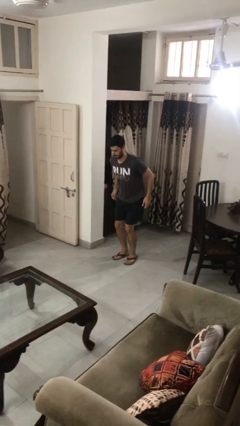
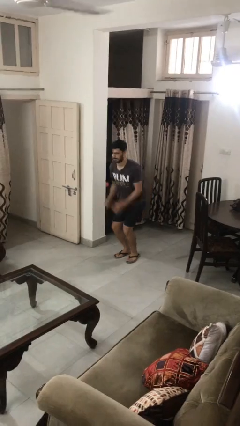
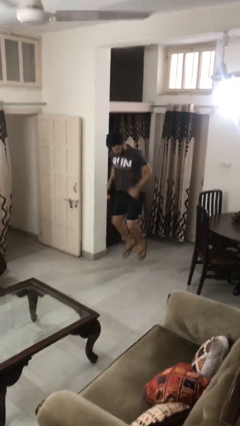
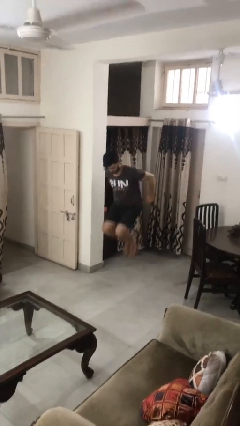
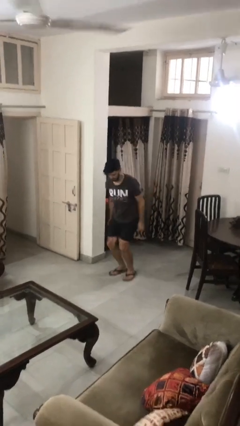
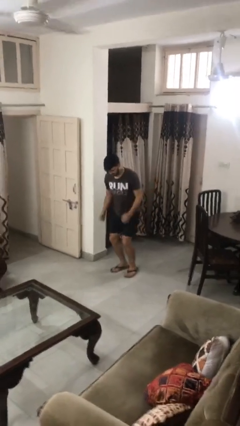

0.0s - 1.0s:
person jumps

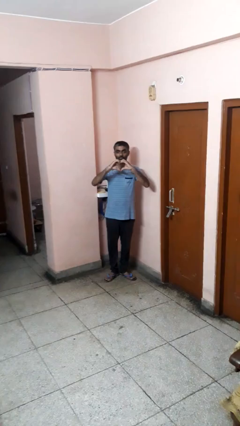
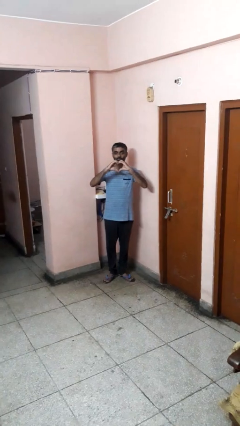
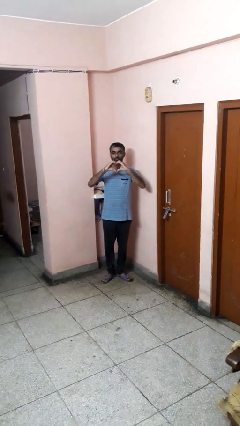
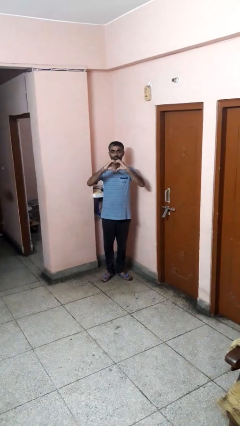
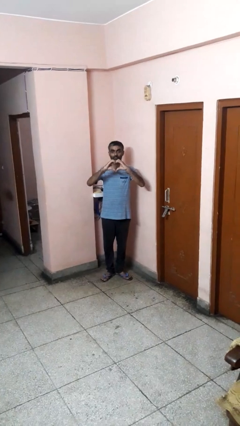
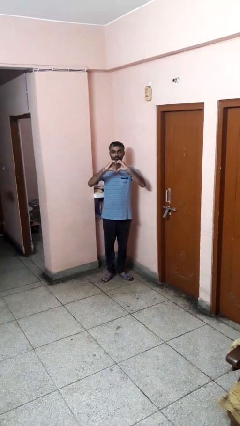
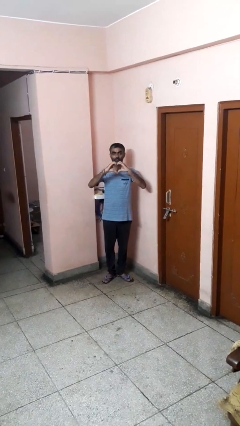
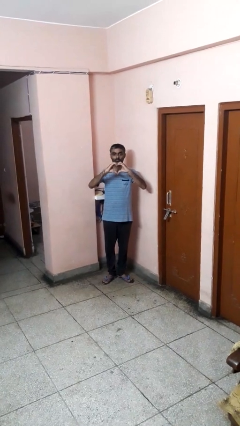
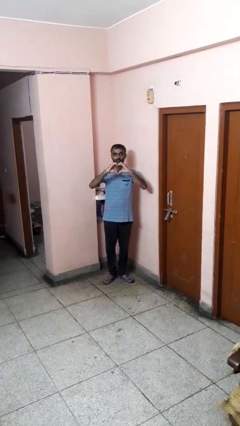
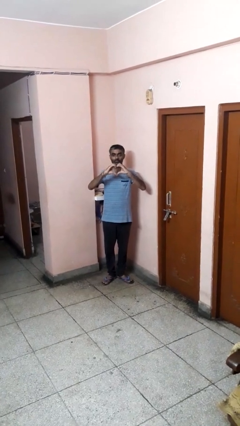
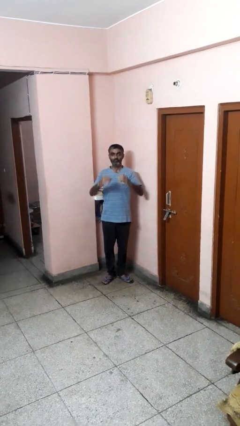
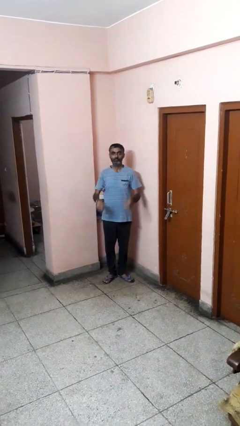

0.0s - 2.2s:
person gestures heart

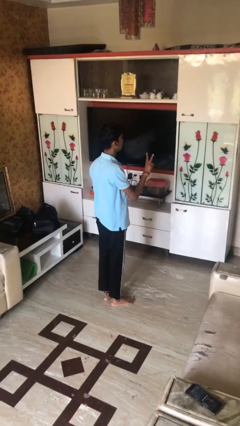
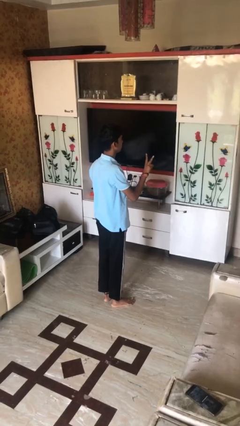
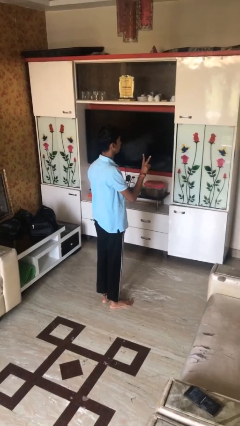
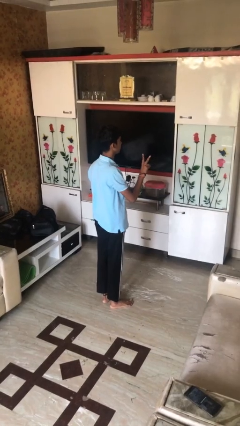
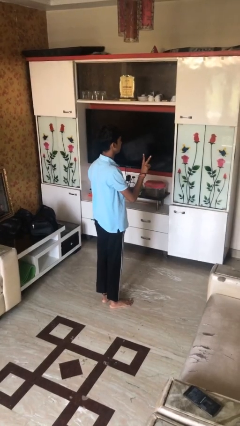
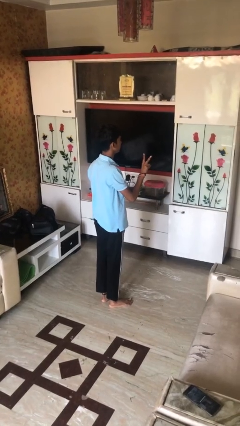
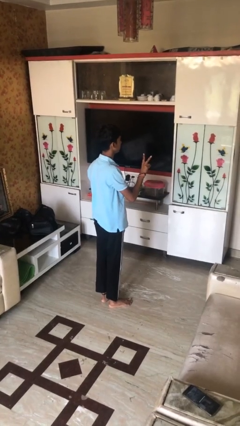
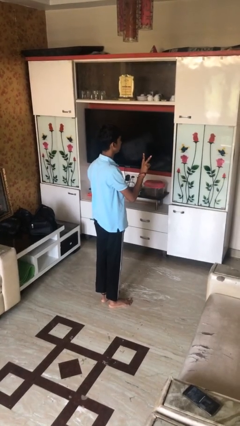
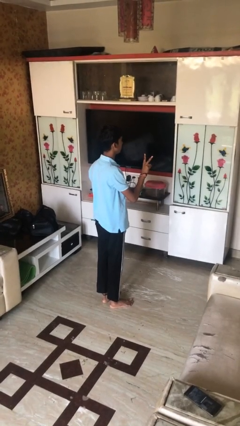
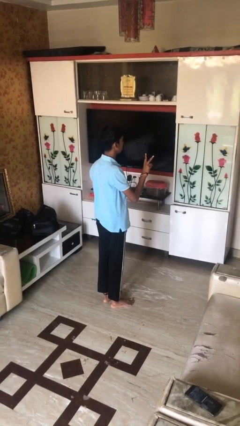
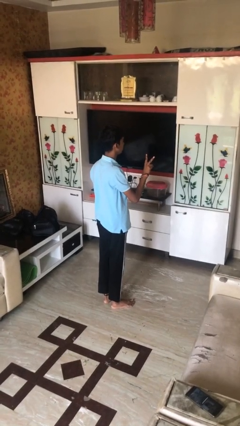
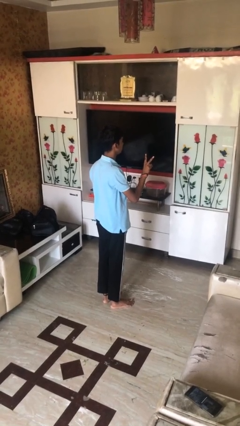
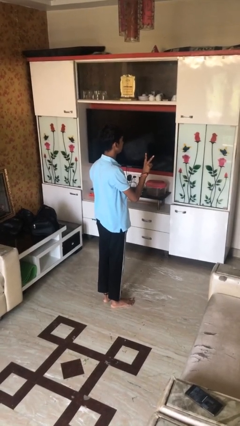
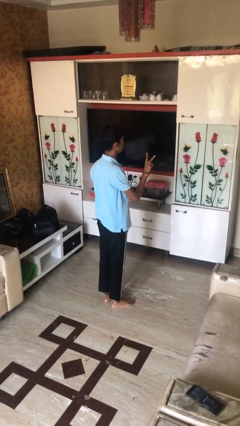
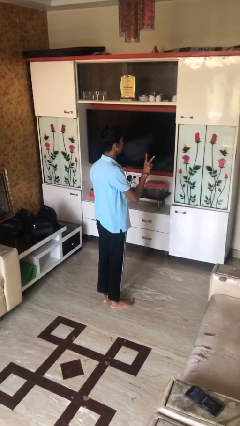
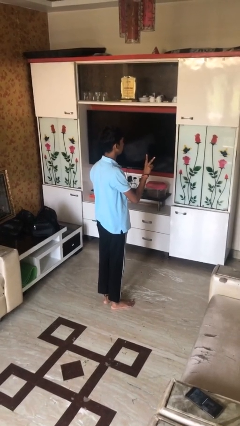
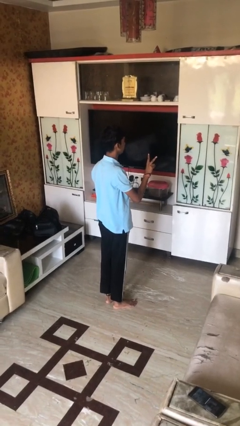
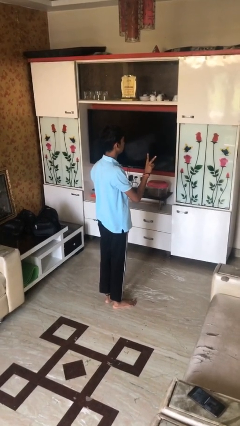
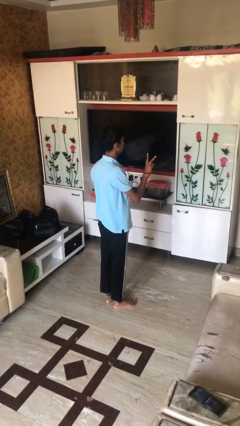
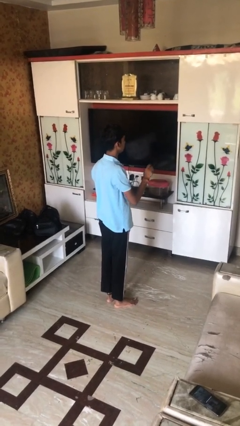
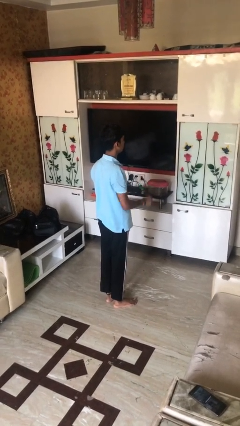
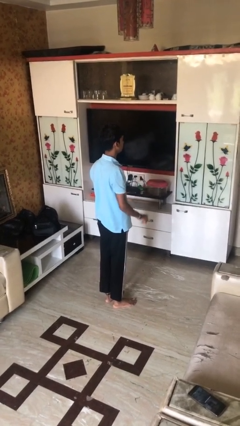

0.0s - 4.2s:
person gestures peace

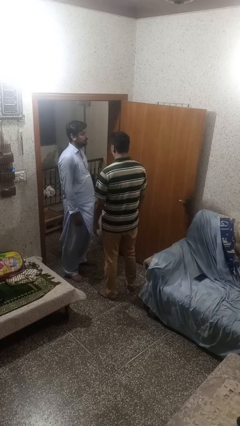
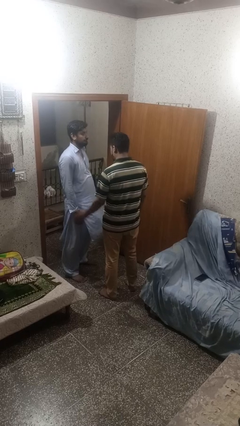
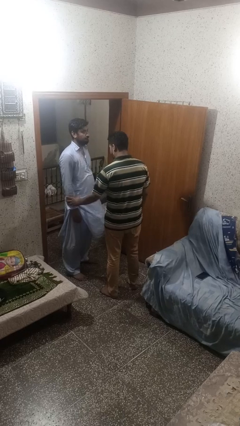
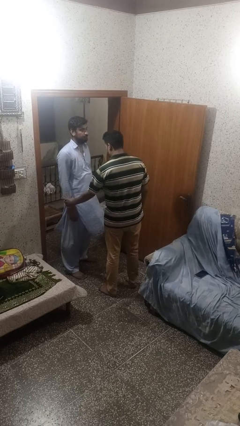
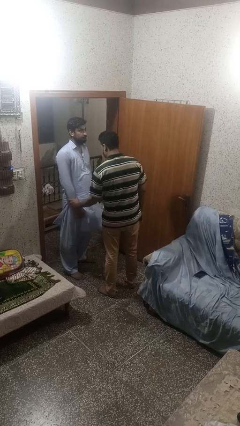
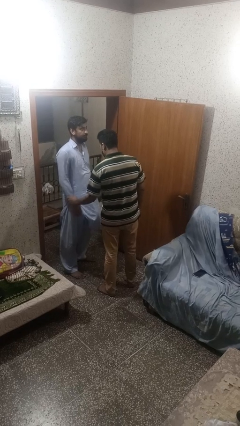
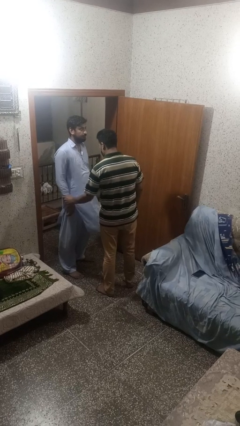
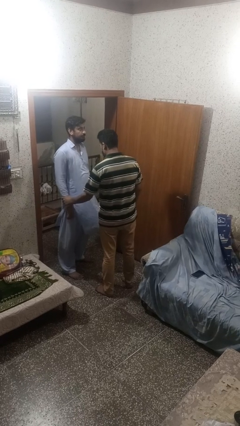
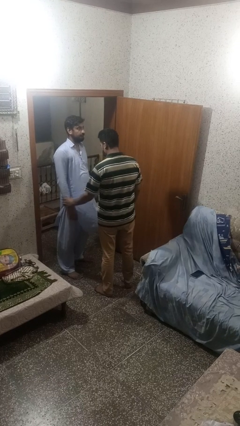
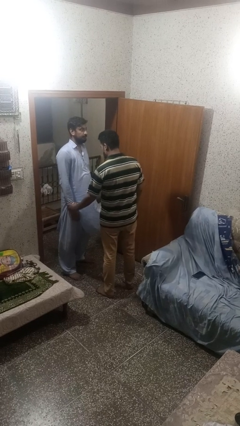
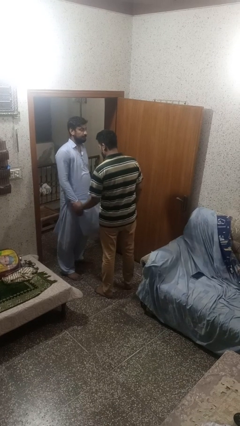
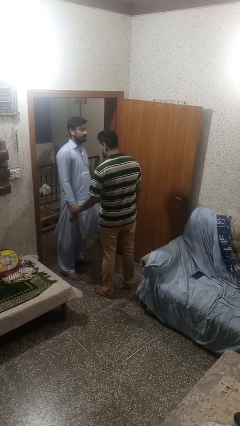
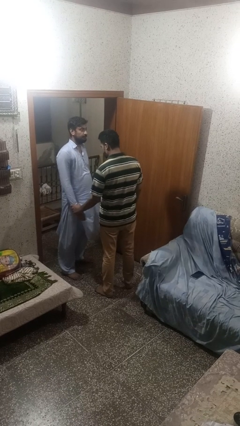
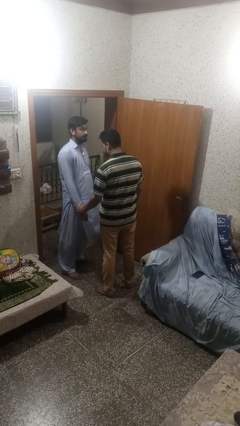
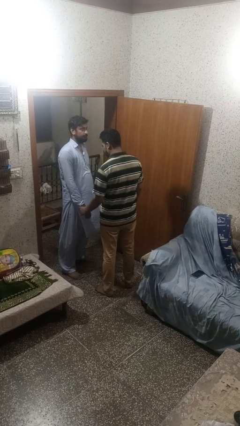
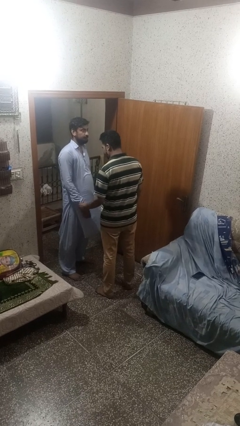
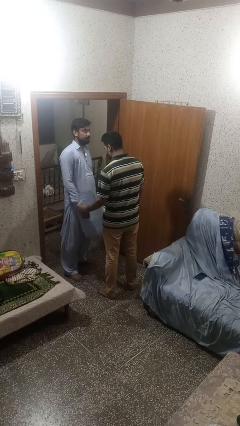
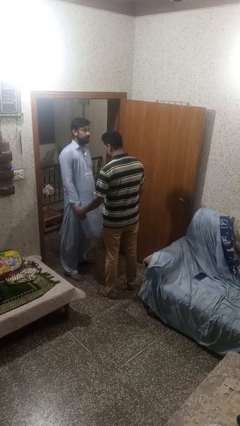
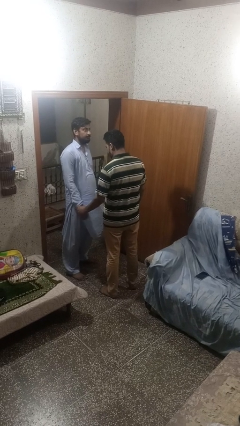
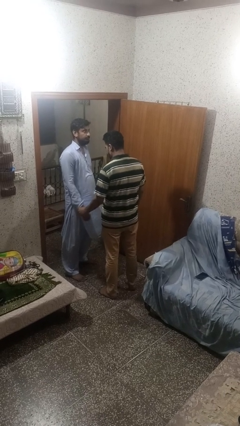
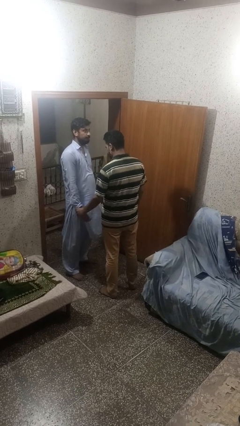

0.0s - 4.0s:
person grabs person by forearm

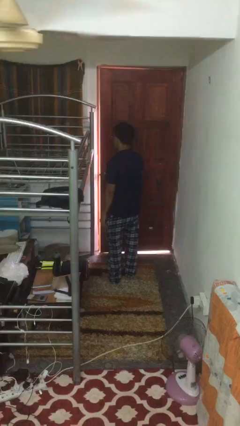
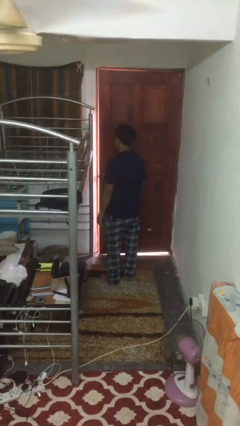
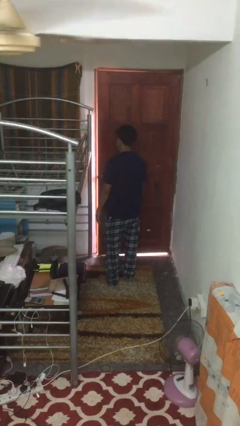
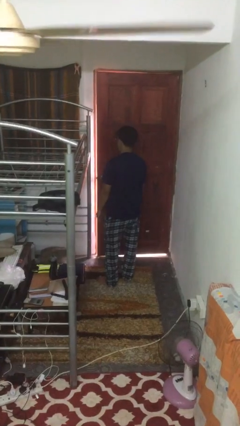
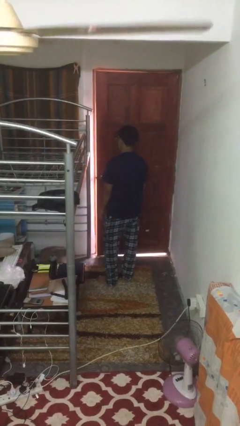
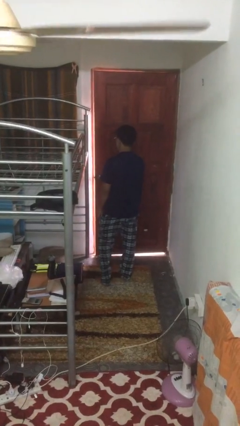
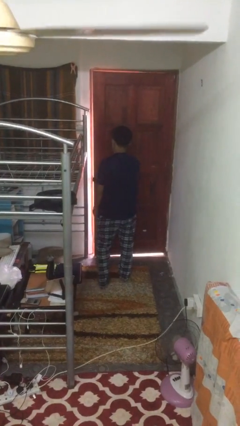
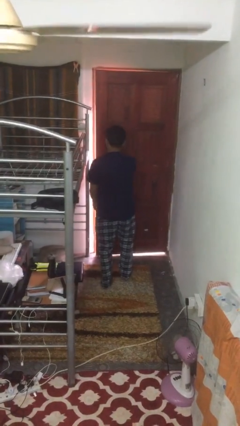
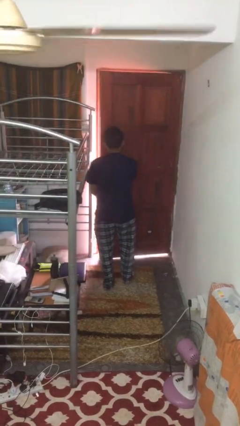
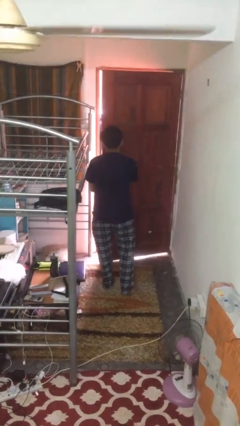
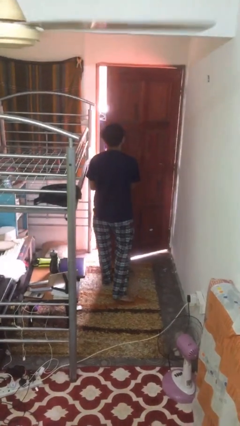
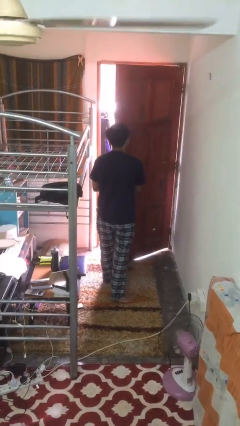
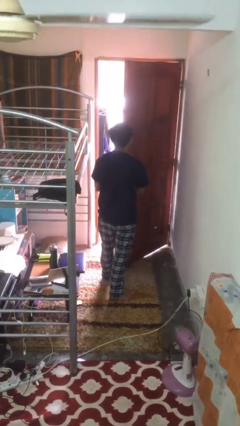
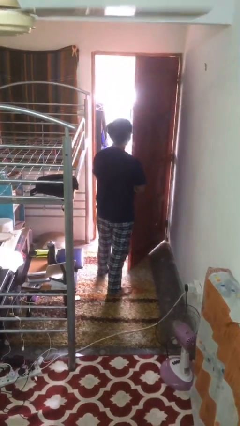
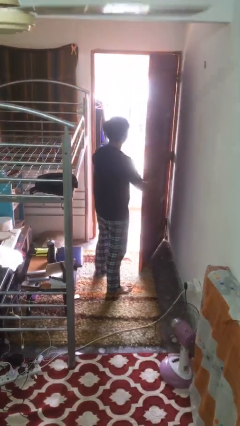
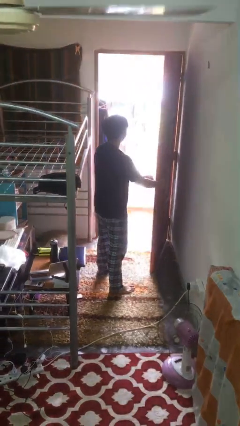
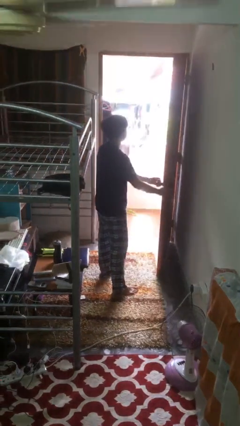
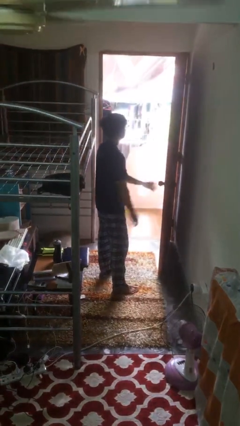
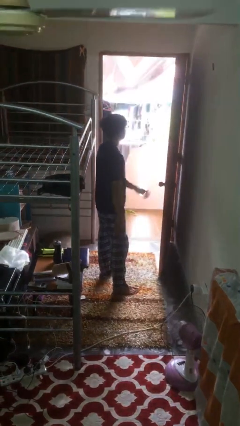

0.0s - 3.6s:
person opens facility door

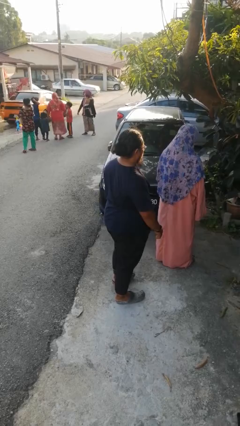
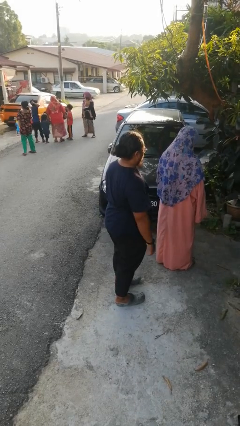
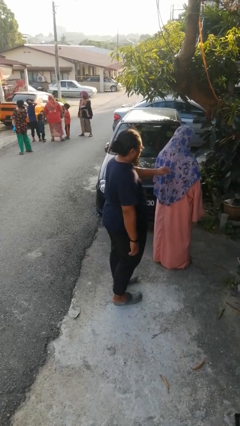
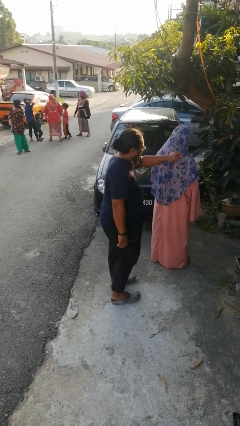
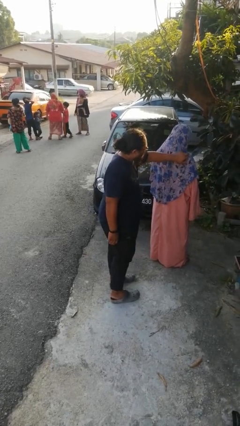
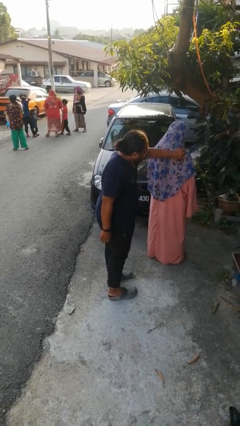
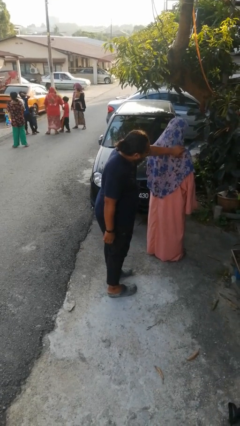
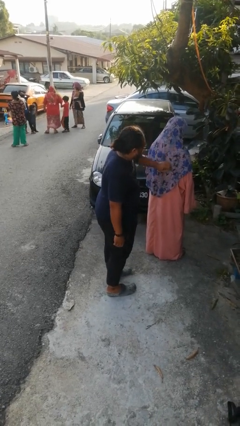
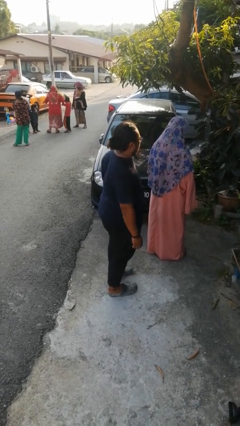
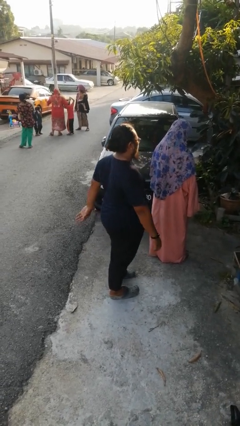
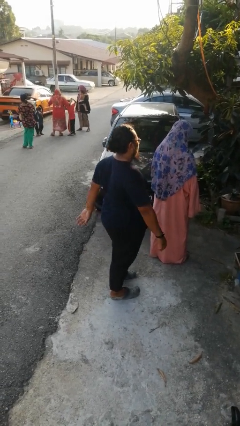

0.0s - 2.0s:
person touches back of person

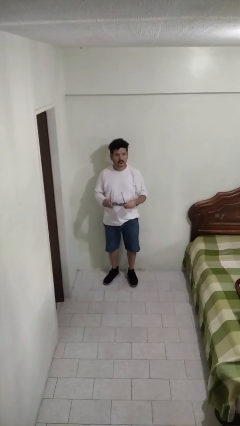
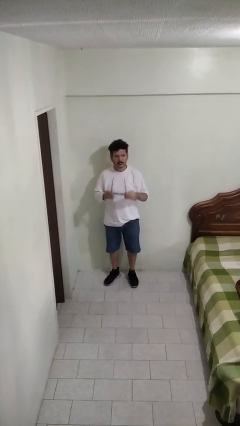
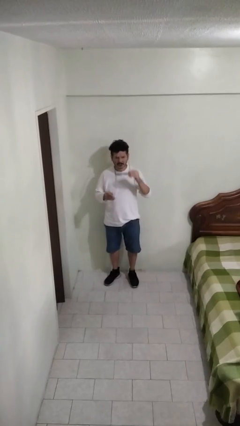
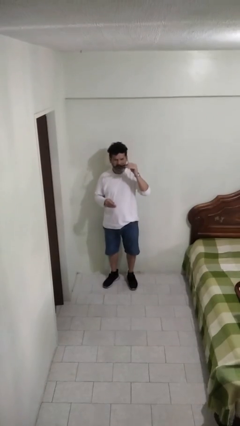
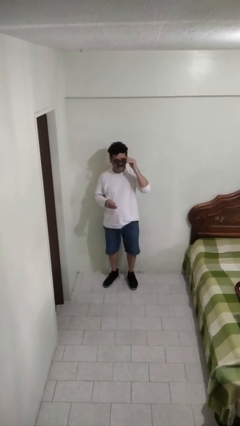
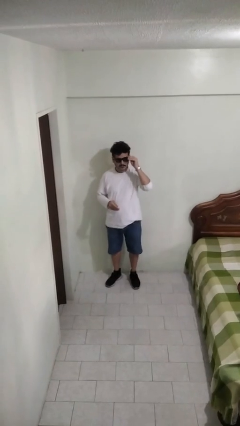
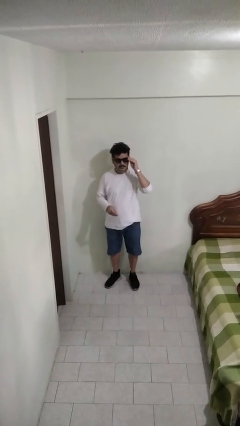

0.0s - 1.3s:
person puts on sunglasses
